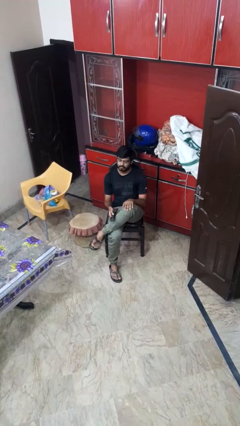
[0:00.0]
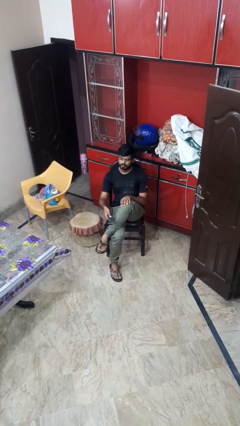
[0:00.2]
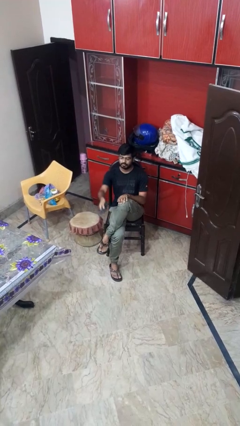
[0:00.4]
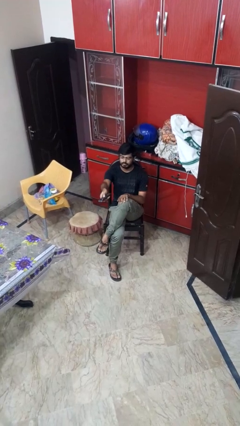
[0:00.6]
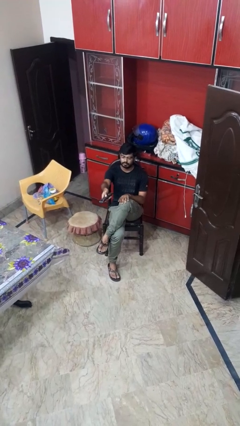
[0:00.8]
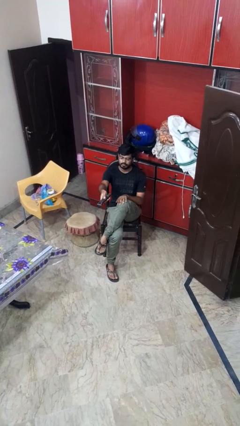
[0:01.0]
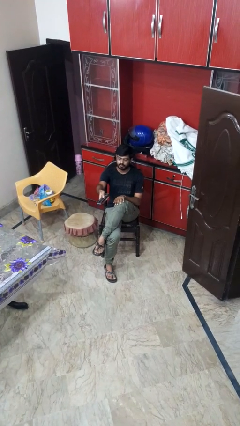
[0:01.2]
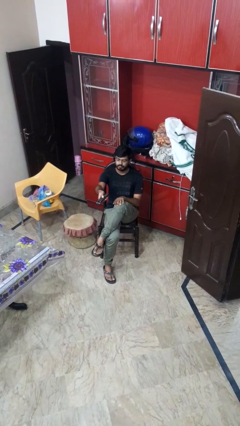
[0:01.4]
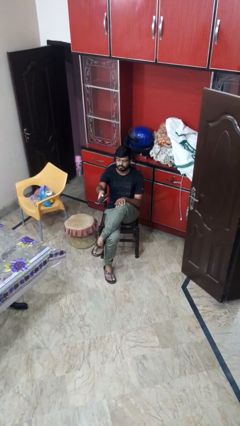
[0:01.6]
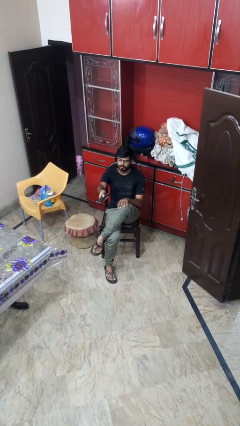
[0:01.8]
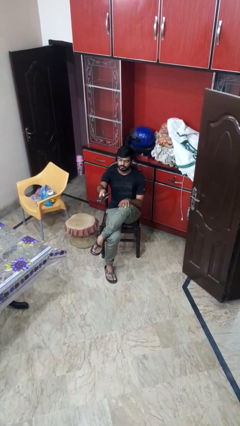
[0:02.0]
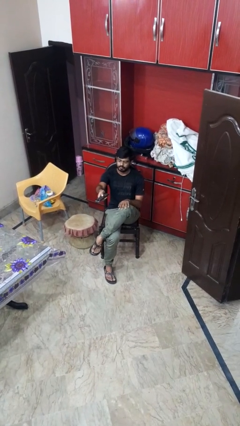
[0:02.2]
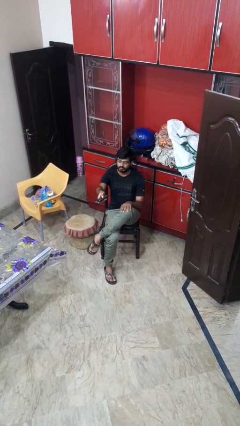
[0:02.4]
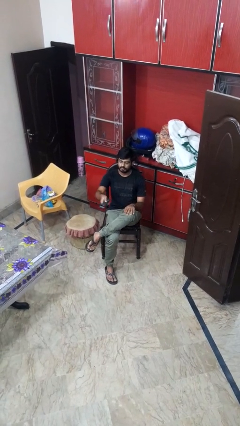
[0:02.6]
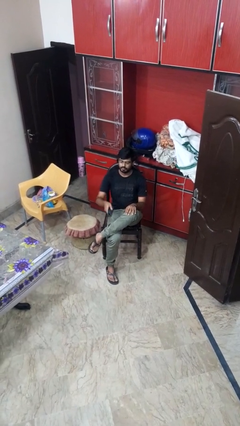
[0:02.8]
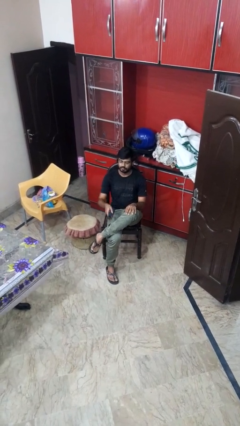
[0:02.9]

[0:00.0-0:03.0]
person uses television remote

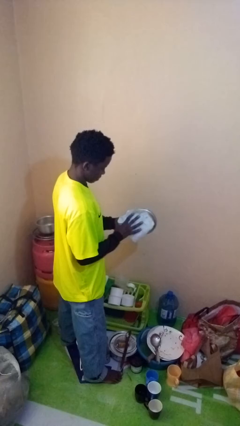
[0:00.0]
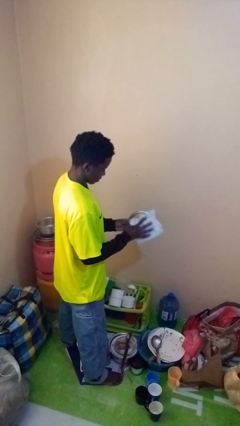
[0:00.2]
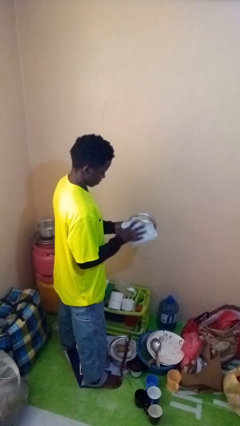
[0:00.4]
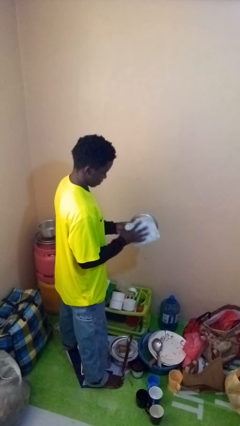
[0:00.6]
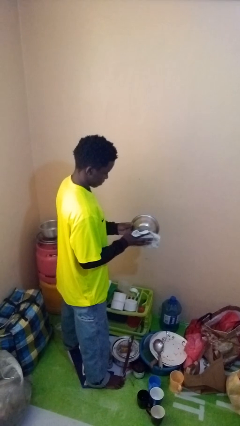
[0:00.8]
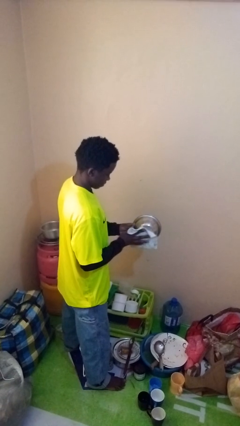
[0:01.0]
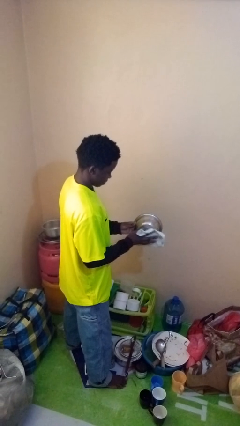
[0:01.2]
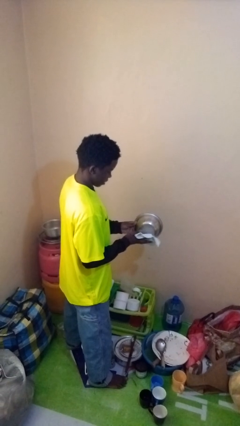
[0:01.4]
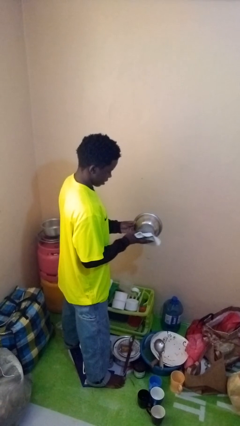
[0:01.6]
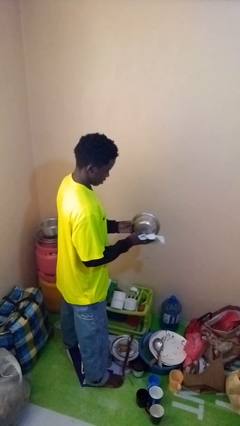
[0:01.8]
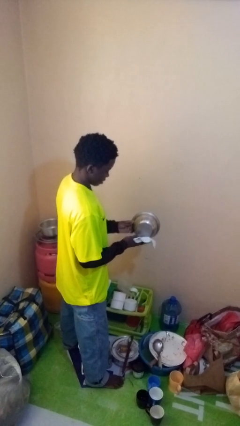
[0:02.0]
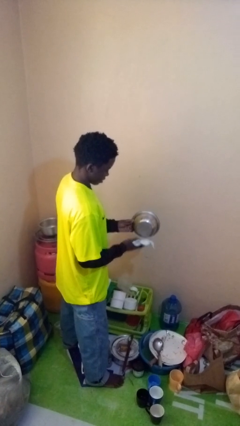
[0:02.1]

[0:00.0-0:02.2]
person dries dish

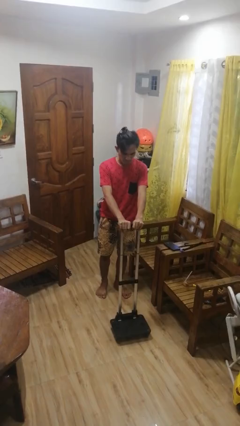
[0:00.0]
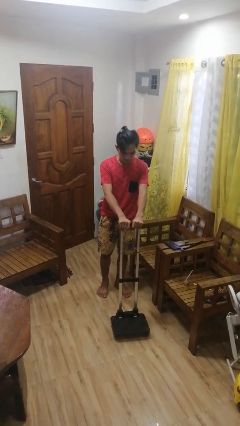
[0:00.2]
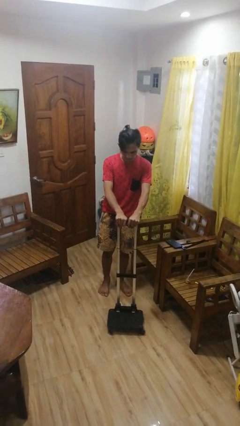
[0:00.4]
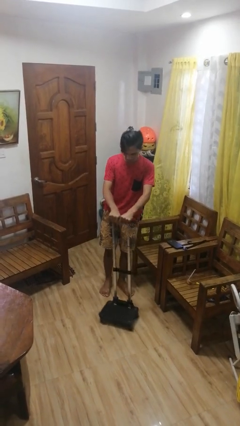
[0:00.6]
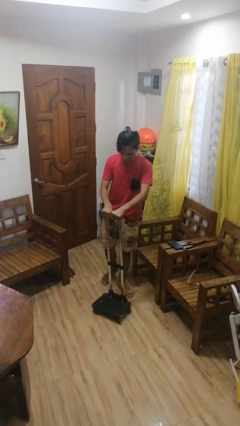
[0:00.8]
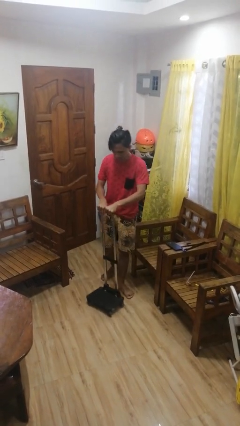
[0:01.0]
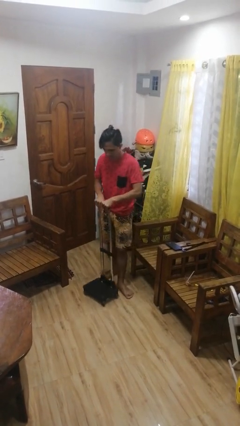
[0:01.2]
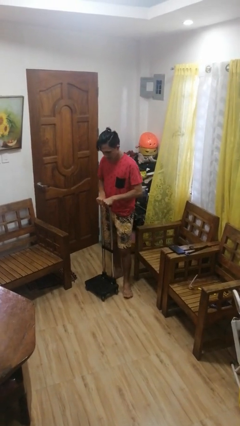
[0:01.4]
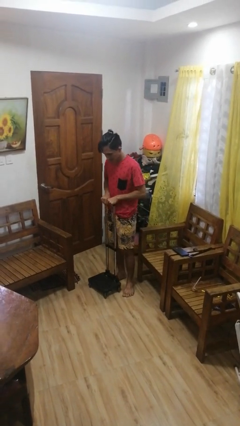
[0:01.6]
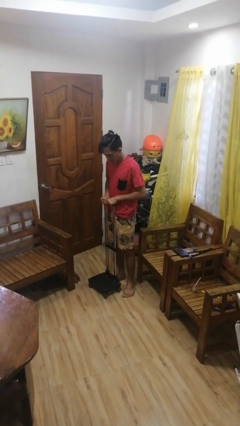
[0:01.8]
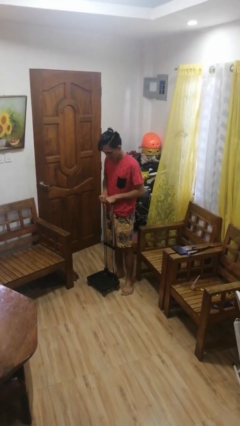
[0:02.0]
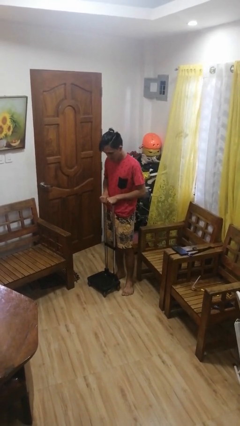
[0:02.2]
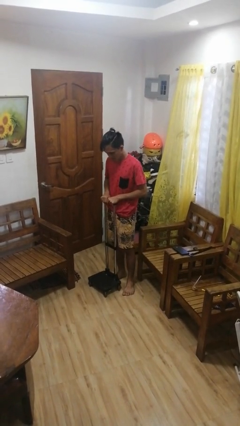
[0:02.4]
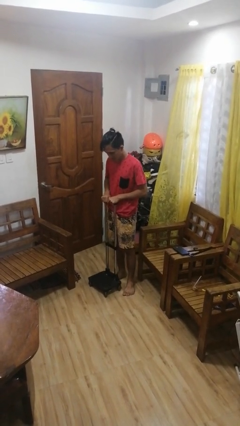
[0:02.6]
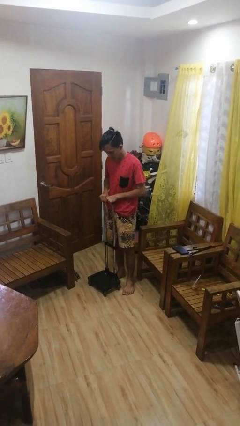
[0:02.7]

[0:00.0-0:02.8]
person pulls wheeled cart

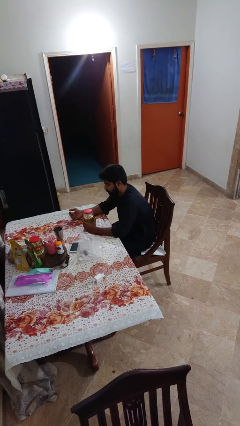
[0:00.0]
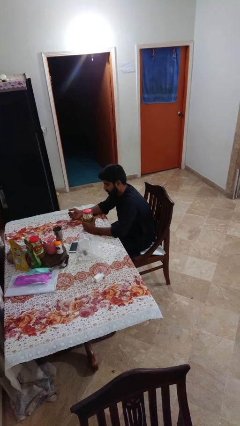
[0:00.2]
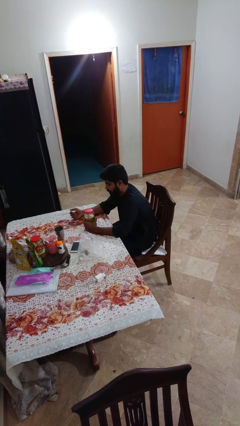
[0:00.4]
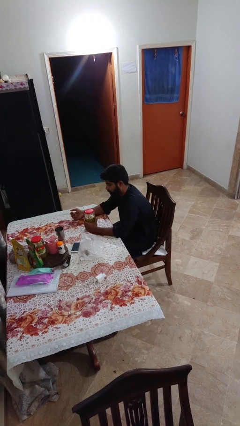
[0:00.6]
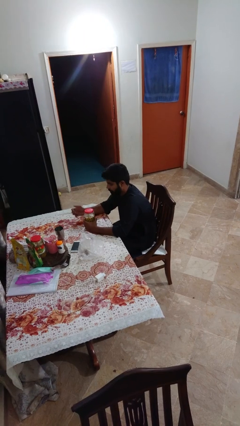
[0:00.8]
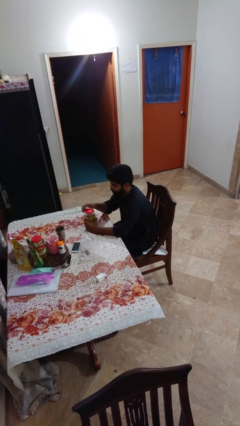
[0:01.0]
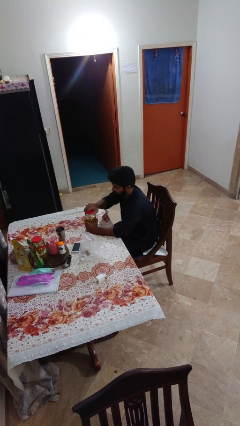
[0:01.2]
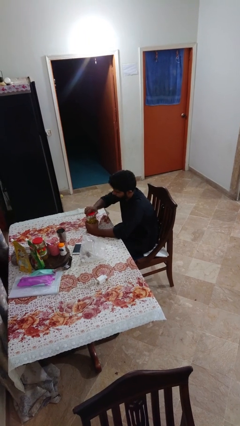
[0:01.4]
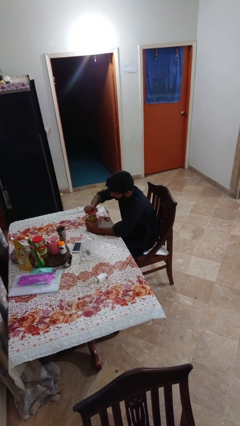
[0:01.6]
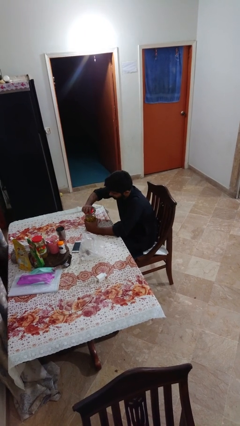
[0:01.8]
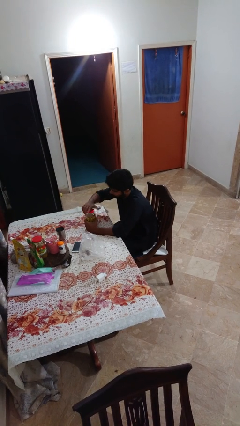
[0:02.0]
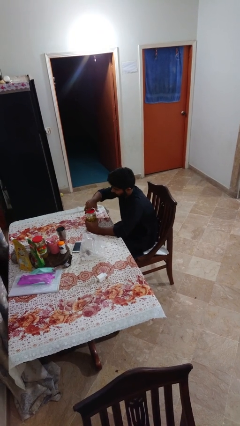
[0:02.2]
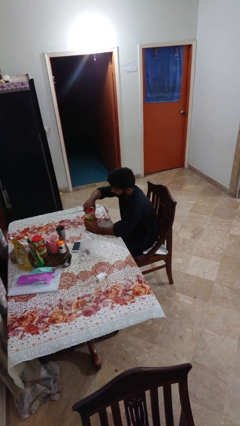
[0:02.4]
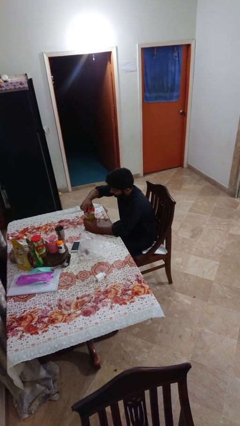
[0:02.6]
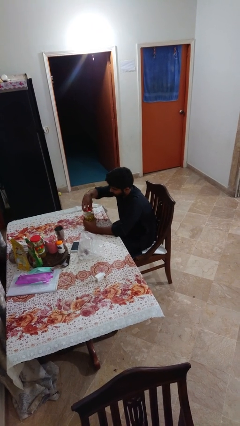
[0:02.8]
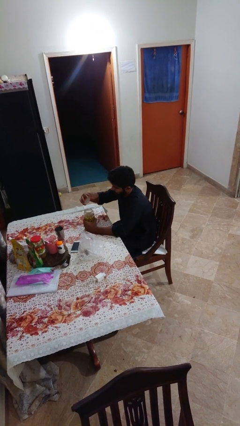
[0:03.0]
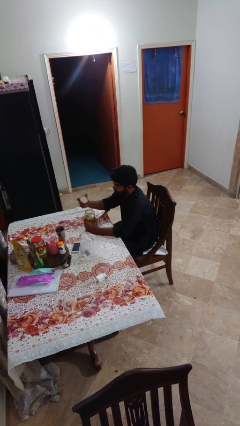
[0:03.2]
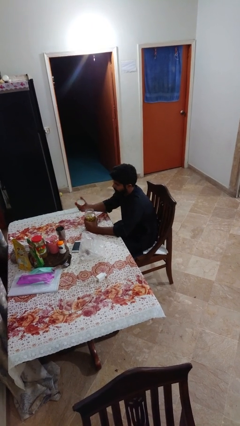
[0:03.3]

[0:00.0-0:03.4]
person opens jar

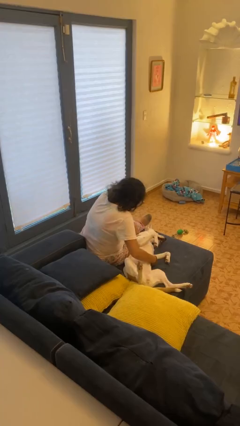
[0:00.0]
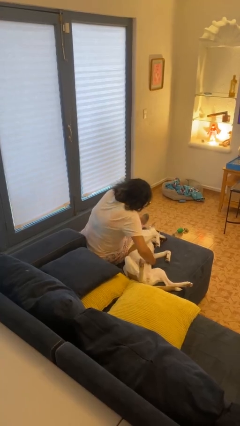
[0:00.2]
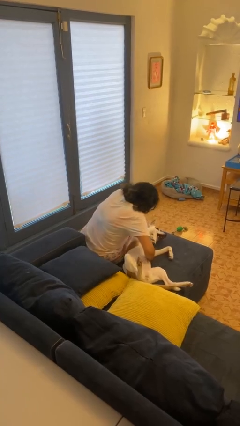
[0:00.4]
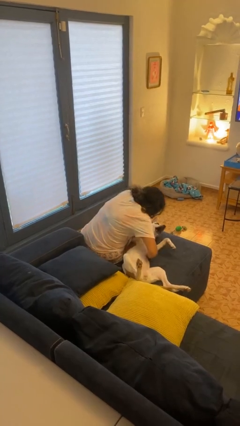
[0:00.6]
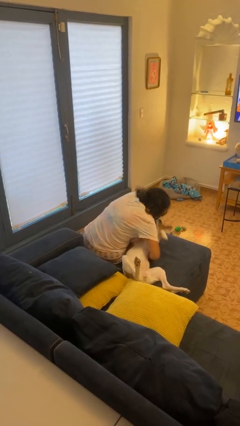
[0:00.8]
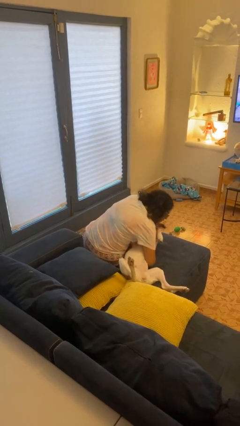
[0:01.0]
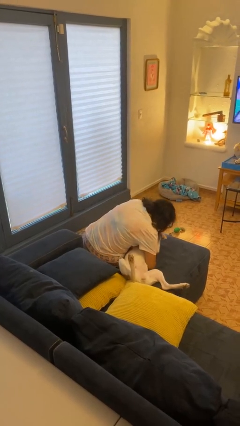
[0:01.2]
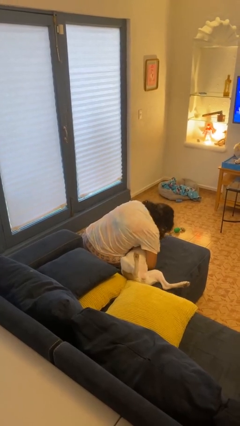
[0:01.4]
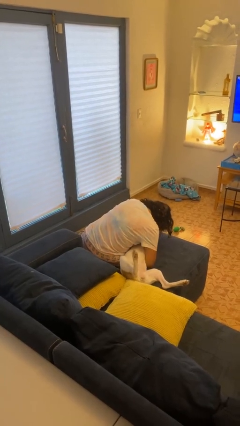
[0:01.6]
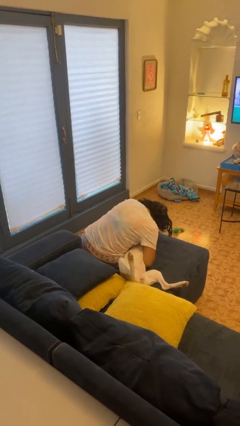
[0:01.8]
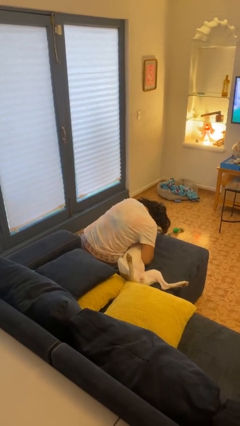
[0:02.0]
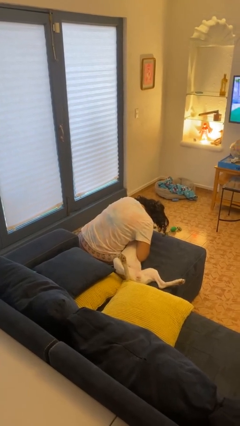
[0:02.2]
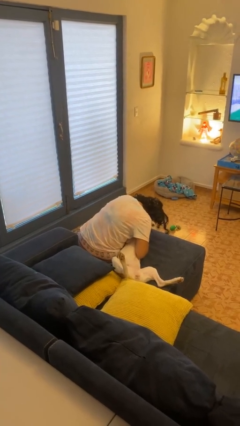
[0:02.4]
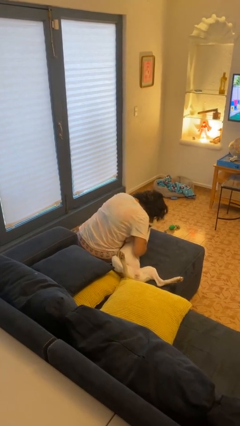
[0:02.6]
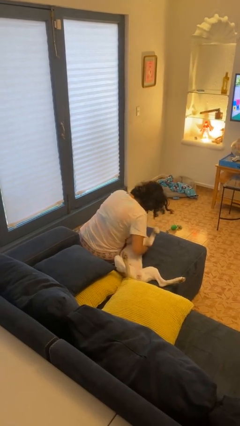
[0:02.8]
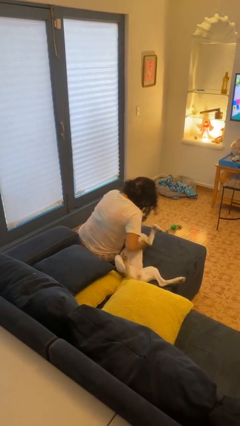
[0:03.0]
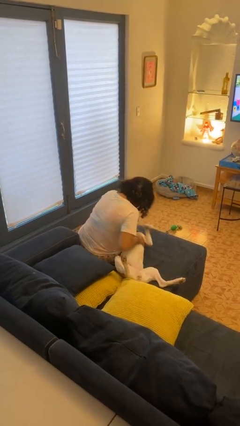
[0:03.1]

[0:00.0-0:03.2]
person hugs dog

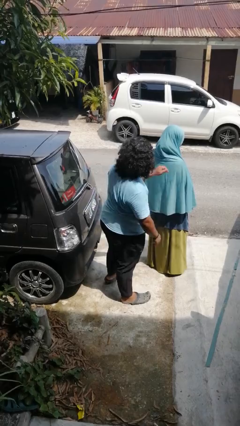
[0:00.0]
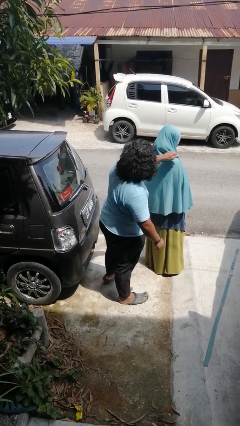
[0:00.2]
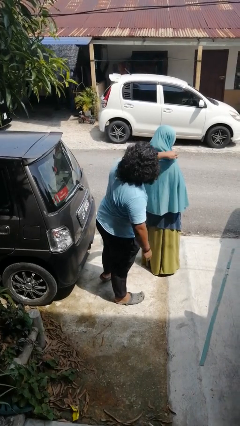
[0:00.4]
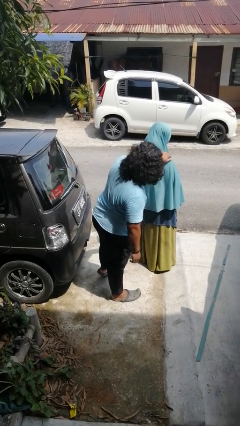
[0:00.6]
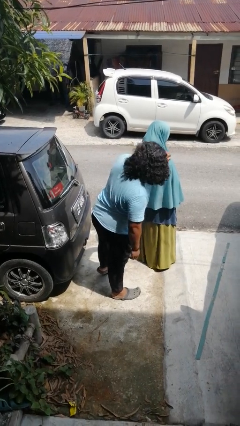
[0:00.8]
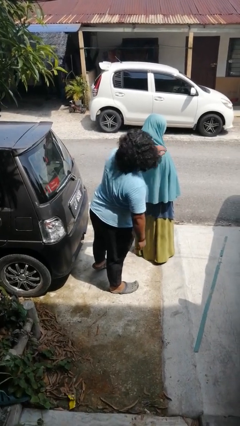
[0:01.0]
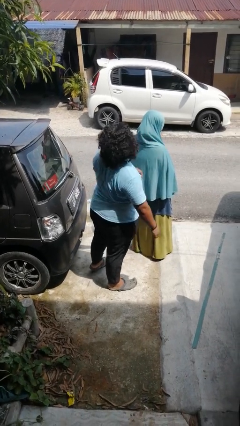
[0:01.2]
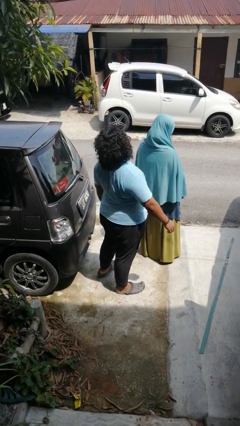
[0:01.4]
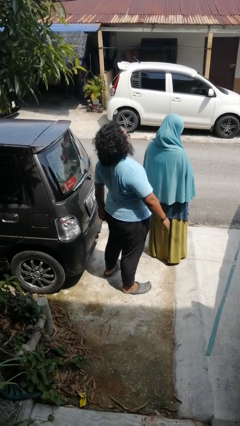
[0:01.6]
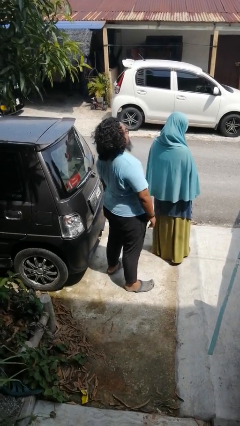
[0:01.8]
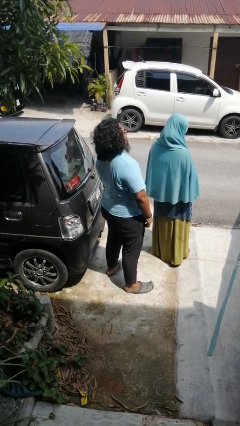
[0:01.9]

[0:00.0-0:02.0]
person touches back of person

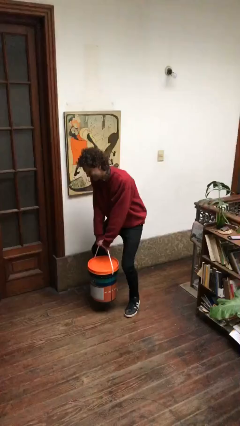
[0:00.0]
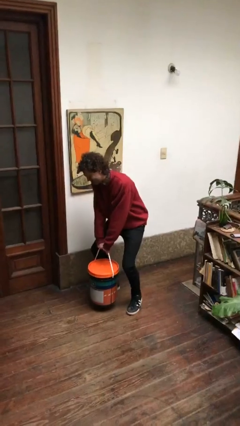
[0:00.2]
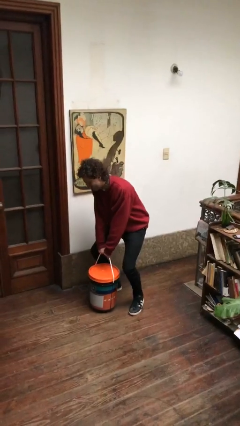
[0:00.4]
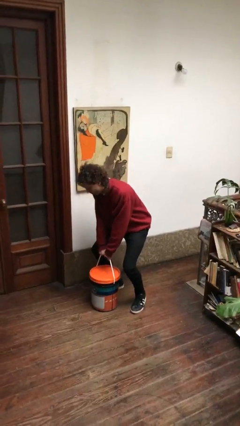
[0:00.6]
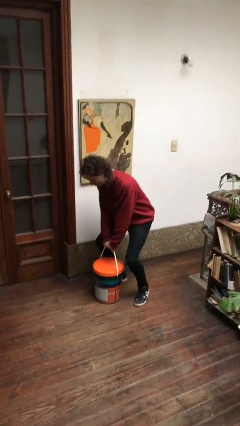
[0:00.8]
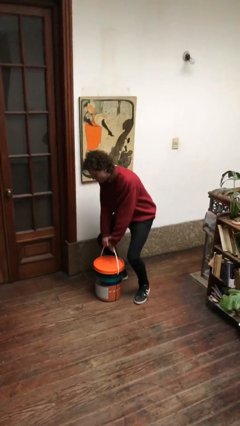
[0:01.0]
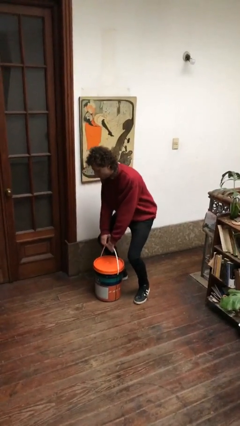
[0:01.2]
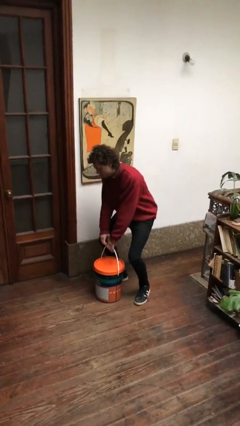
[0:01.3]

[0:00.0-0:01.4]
person puts down object on floor
